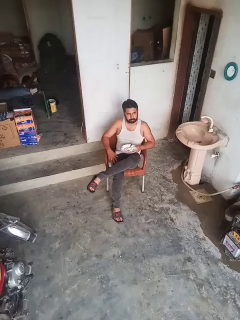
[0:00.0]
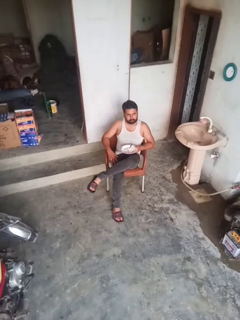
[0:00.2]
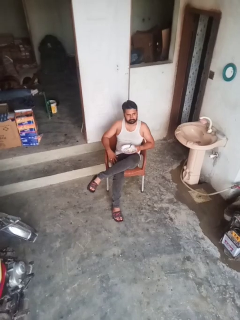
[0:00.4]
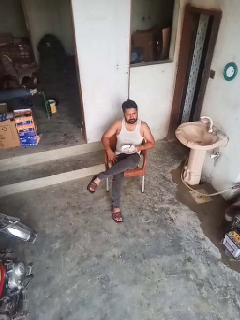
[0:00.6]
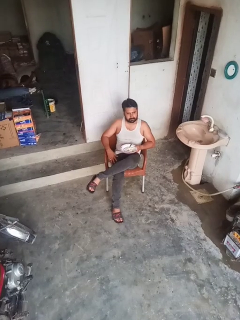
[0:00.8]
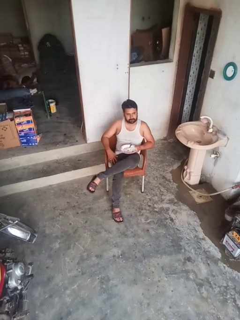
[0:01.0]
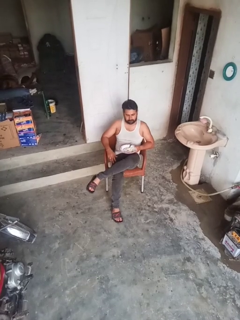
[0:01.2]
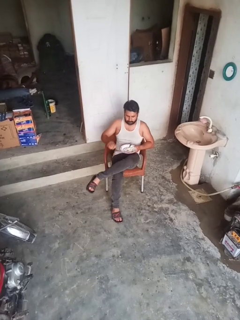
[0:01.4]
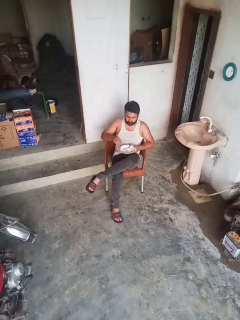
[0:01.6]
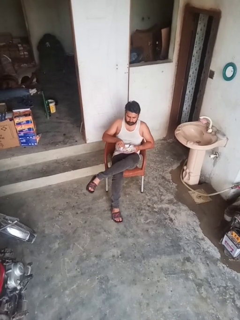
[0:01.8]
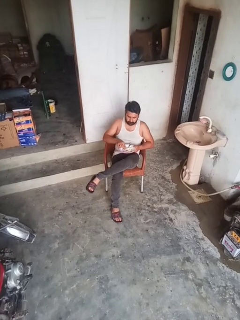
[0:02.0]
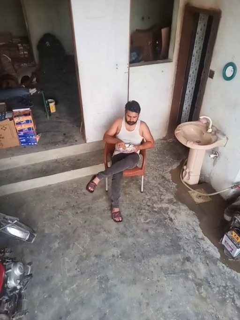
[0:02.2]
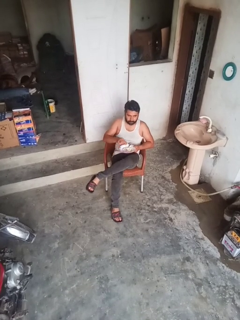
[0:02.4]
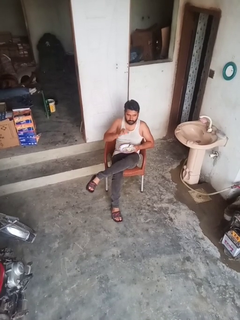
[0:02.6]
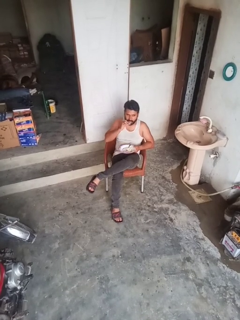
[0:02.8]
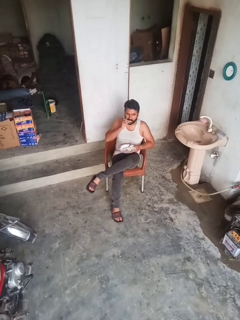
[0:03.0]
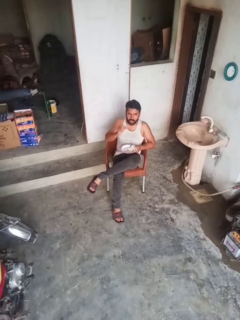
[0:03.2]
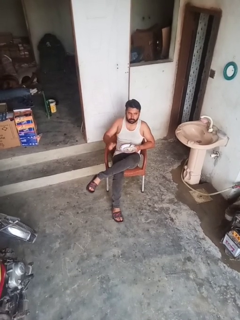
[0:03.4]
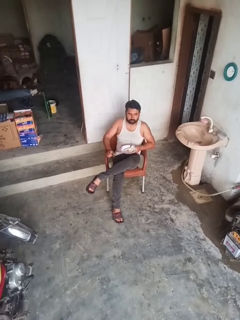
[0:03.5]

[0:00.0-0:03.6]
person eats with hands

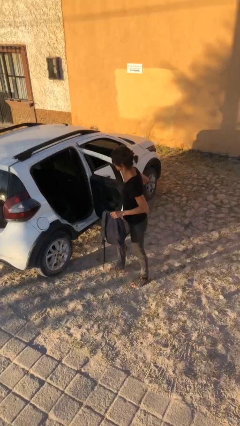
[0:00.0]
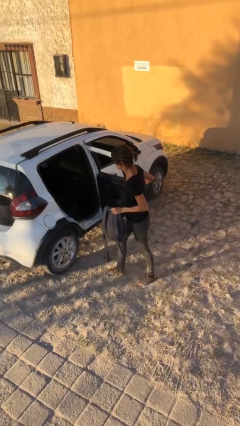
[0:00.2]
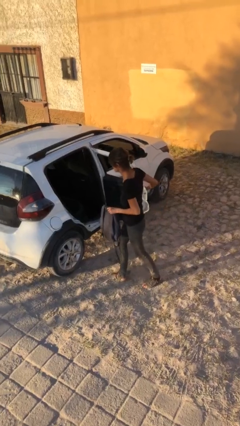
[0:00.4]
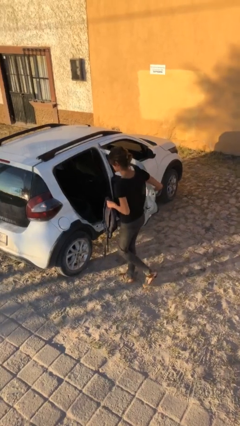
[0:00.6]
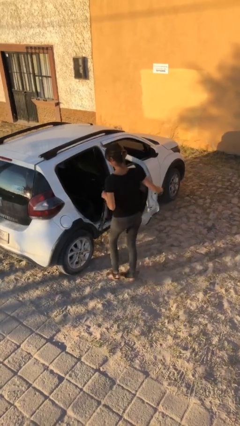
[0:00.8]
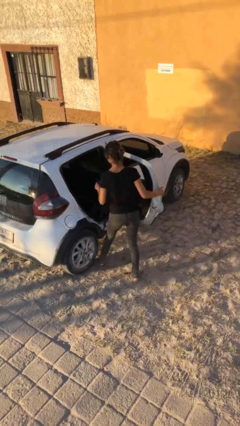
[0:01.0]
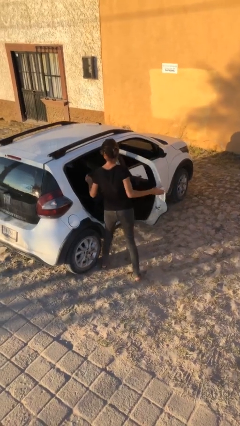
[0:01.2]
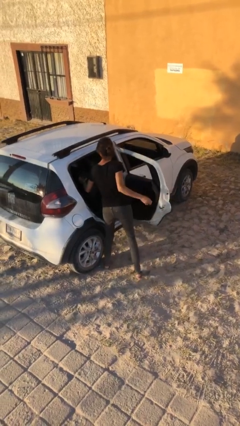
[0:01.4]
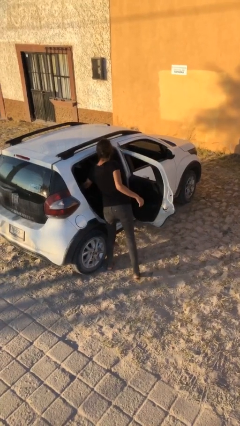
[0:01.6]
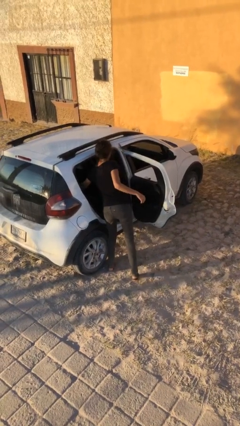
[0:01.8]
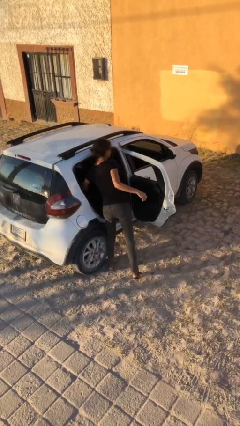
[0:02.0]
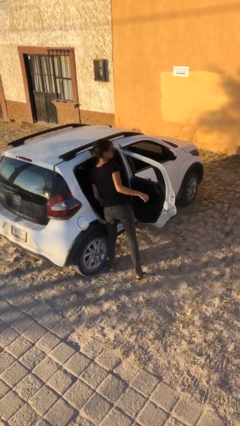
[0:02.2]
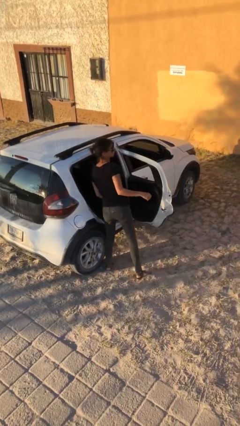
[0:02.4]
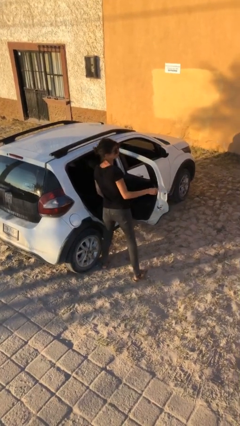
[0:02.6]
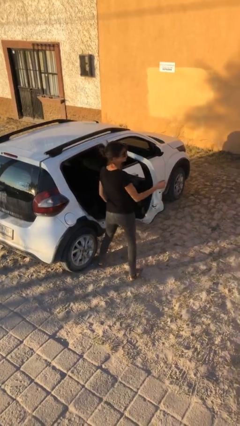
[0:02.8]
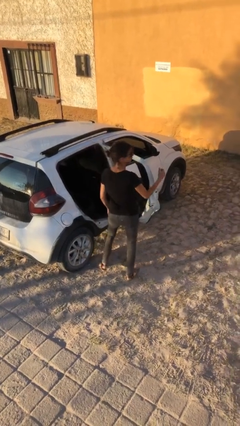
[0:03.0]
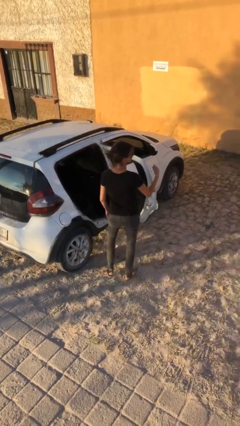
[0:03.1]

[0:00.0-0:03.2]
person loads car

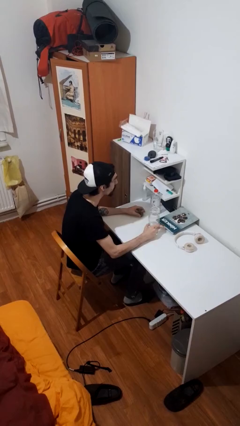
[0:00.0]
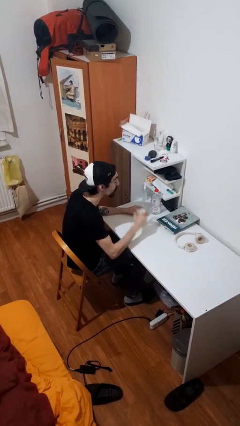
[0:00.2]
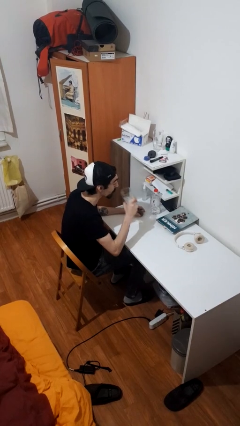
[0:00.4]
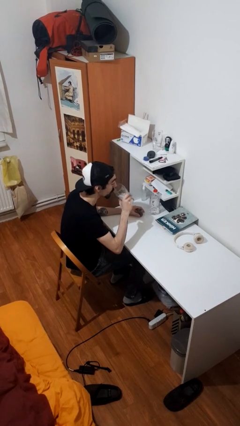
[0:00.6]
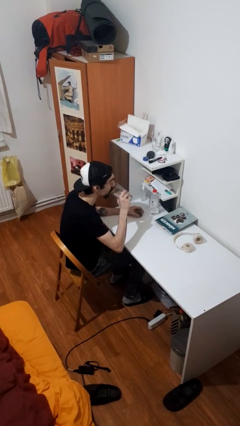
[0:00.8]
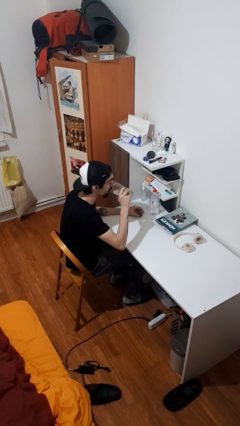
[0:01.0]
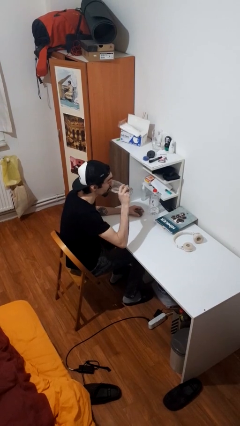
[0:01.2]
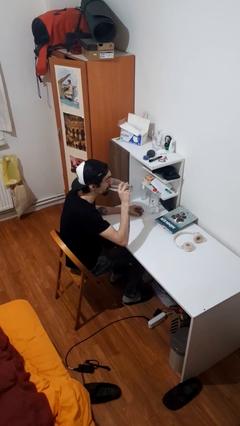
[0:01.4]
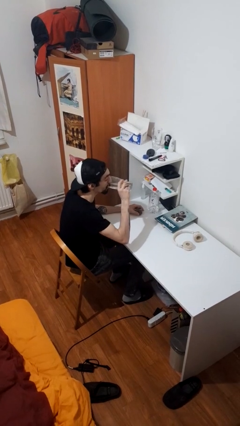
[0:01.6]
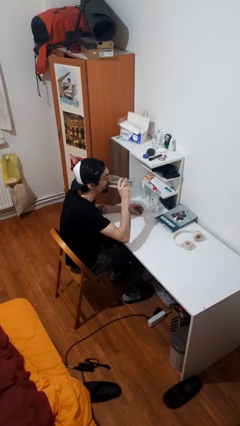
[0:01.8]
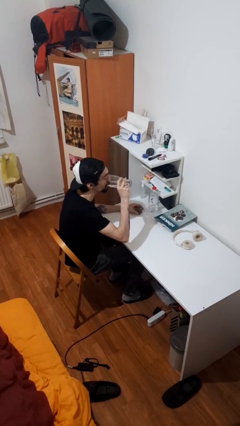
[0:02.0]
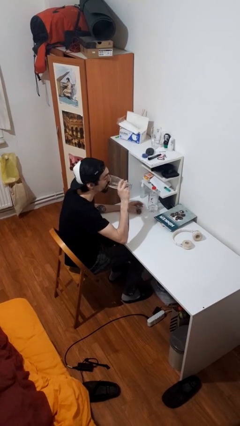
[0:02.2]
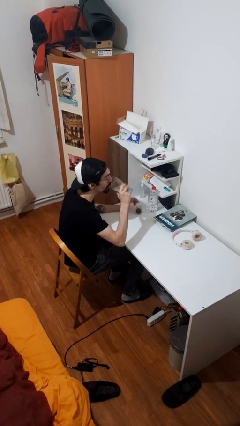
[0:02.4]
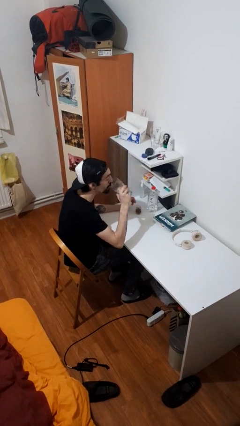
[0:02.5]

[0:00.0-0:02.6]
person drinks from cup

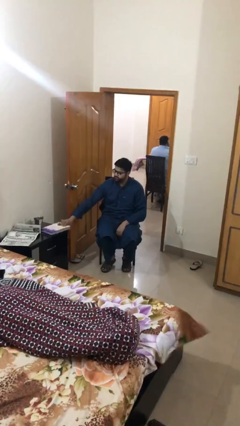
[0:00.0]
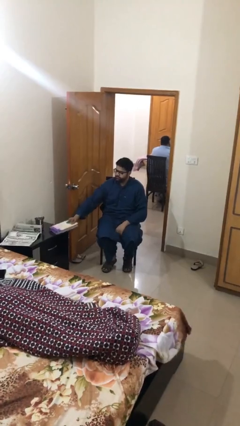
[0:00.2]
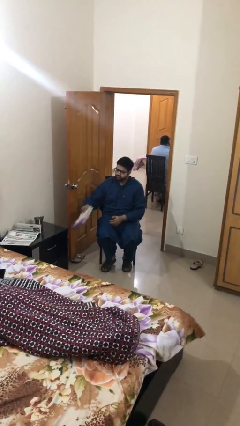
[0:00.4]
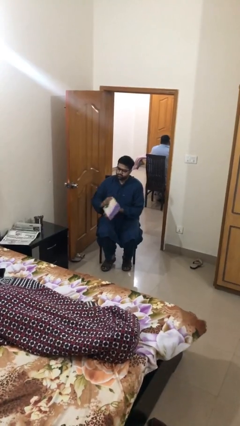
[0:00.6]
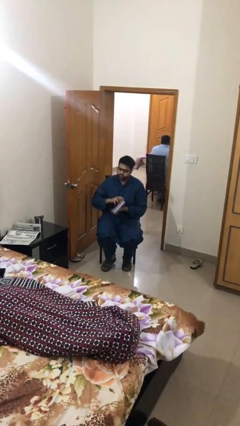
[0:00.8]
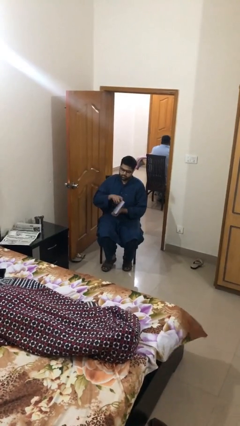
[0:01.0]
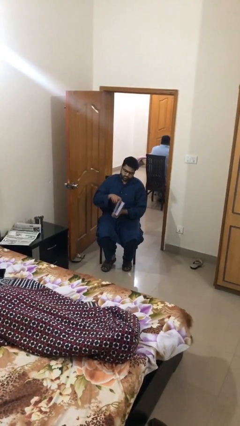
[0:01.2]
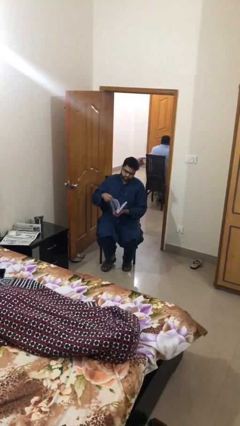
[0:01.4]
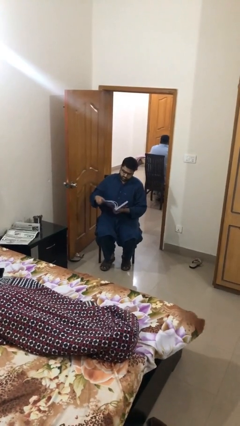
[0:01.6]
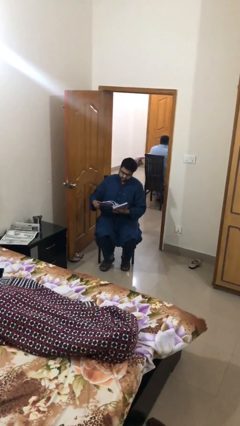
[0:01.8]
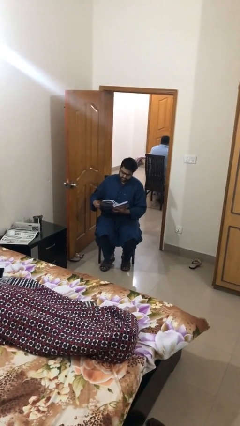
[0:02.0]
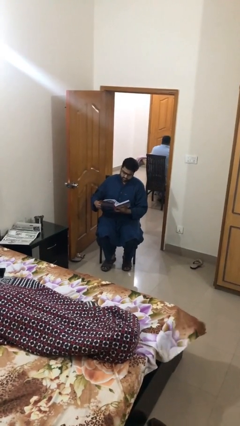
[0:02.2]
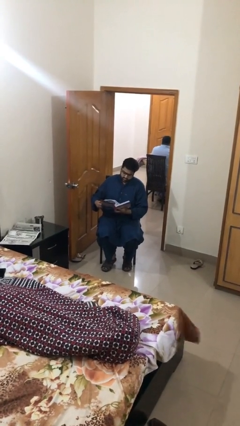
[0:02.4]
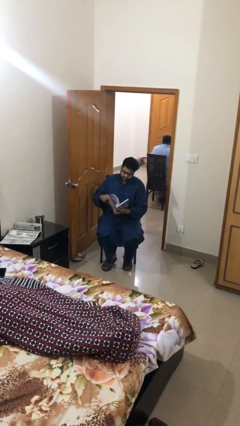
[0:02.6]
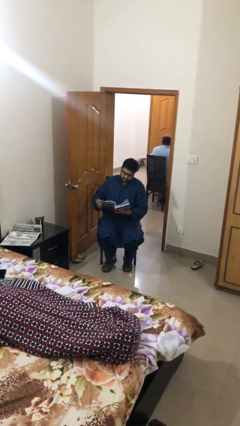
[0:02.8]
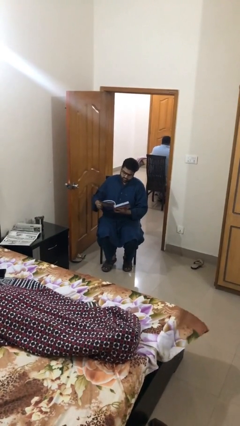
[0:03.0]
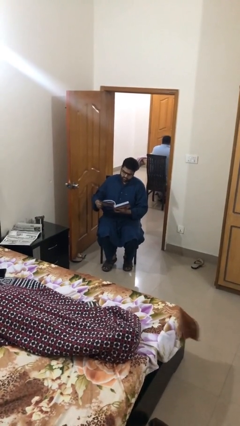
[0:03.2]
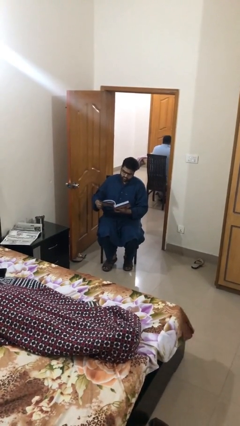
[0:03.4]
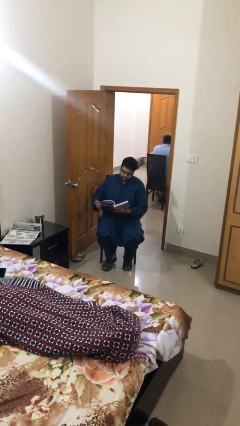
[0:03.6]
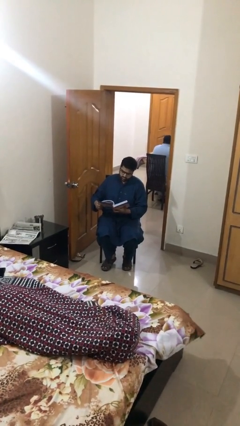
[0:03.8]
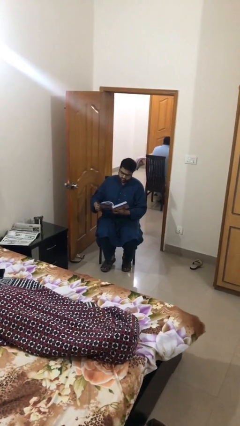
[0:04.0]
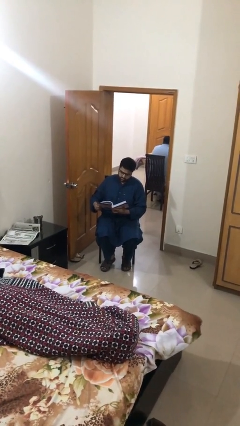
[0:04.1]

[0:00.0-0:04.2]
person reads document

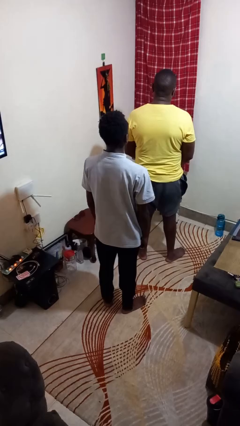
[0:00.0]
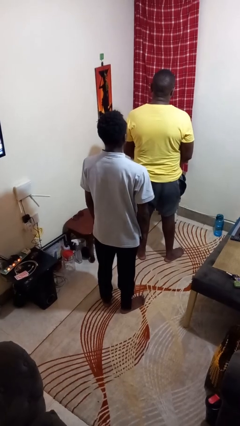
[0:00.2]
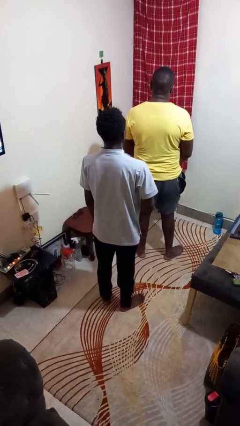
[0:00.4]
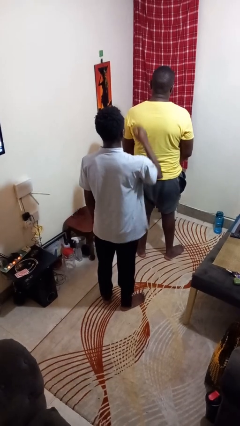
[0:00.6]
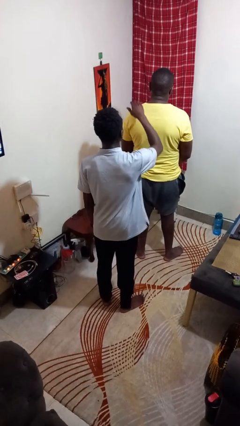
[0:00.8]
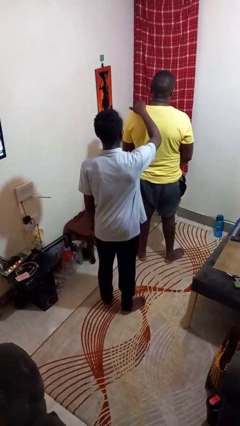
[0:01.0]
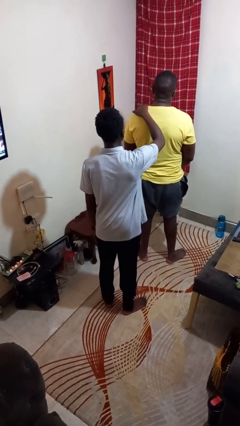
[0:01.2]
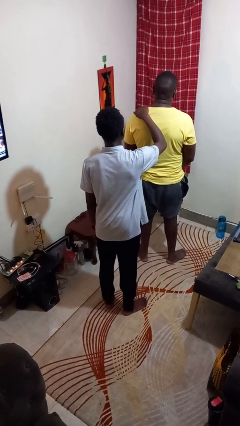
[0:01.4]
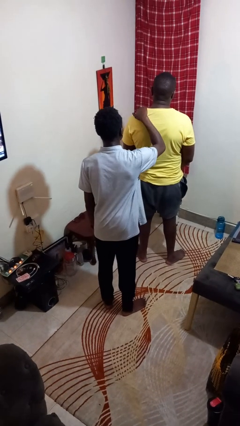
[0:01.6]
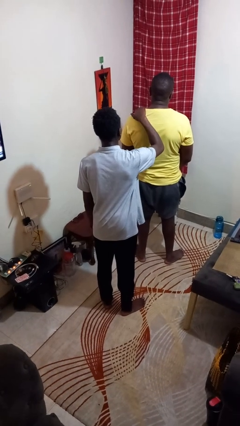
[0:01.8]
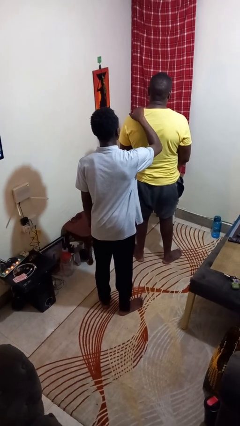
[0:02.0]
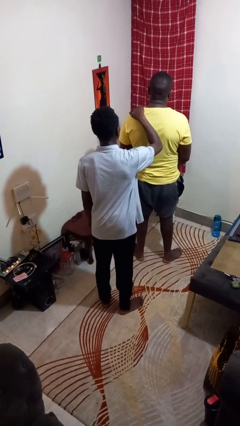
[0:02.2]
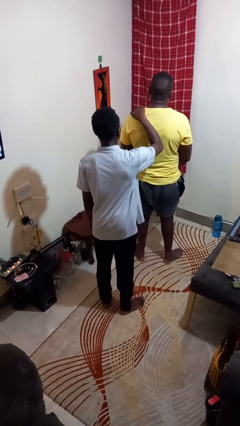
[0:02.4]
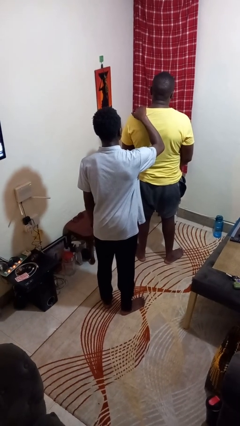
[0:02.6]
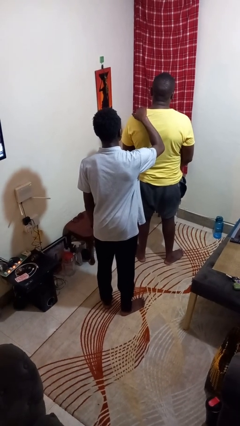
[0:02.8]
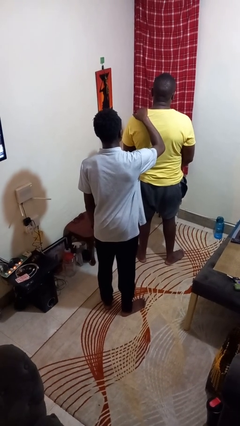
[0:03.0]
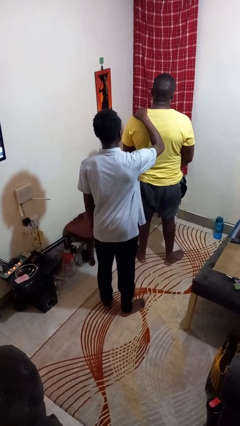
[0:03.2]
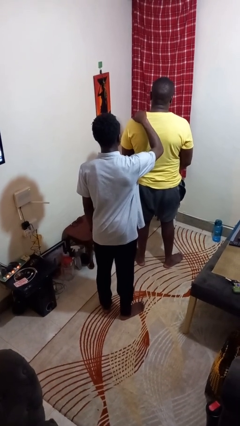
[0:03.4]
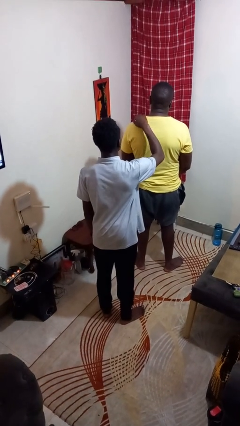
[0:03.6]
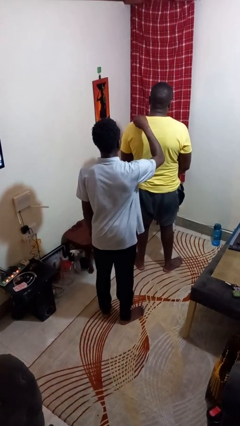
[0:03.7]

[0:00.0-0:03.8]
person touches back of person

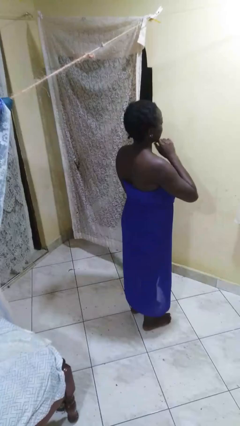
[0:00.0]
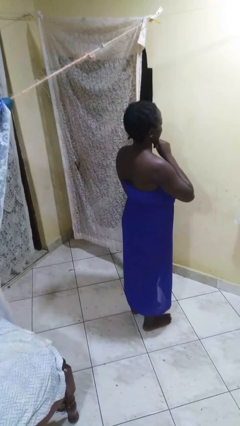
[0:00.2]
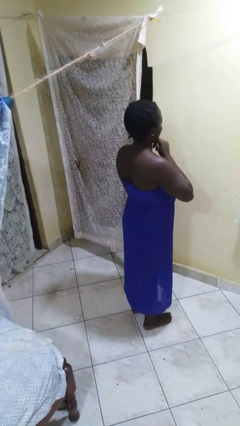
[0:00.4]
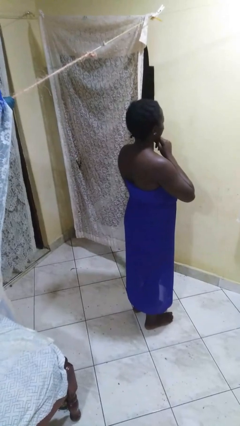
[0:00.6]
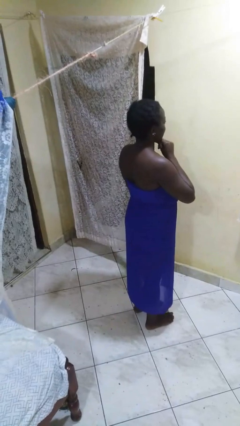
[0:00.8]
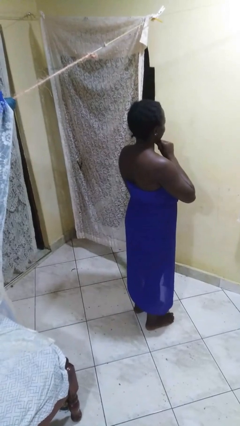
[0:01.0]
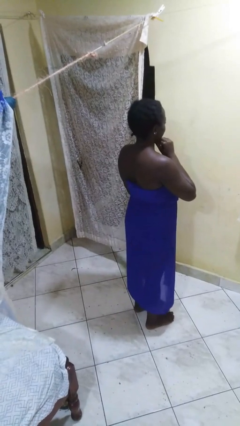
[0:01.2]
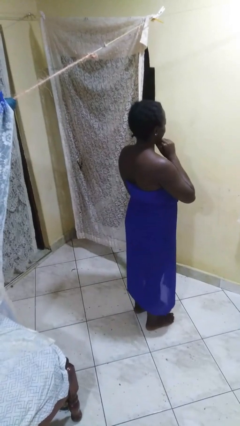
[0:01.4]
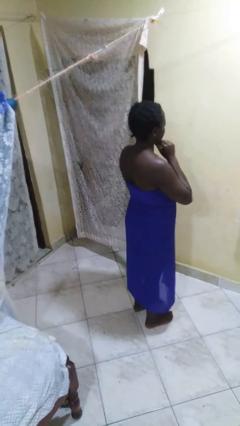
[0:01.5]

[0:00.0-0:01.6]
person strokes chin
